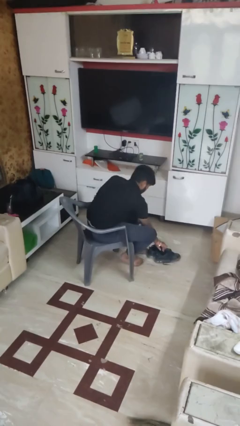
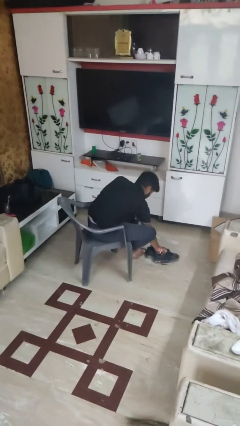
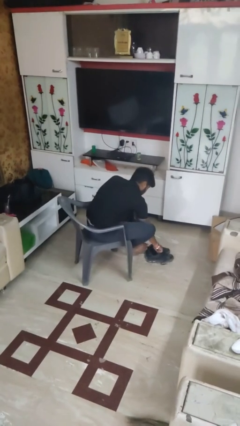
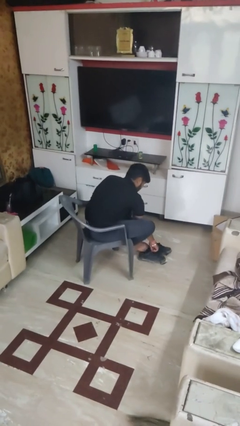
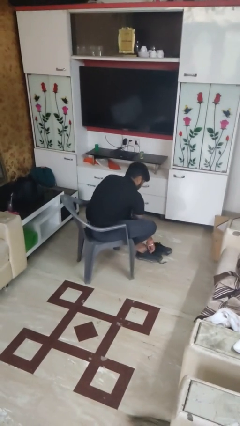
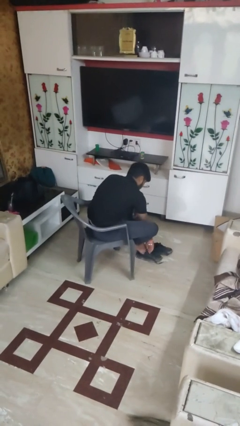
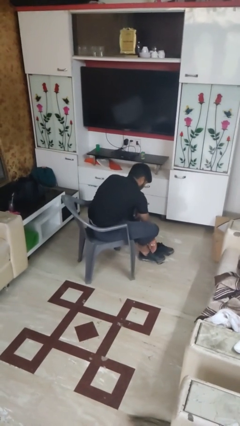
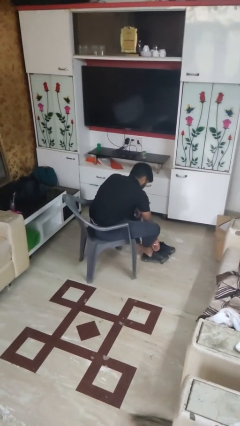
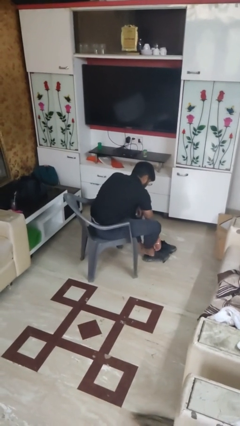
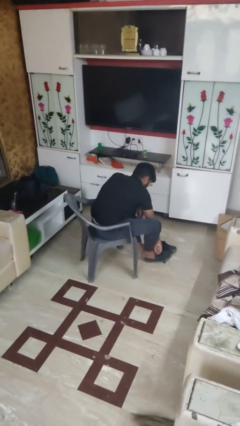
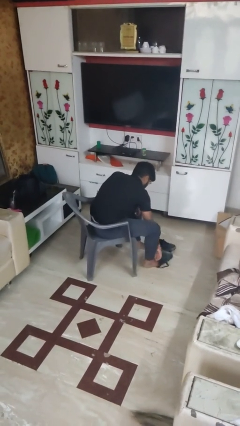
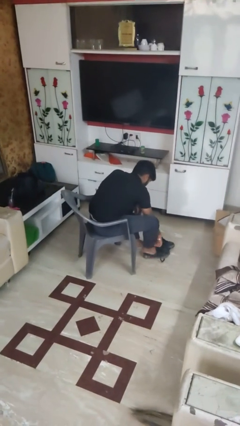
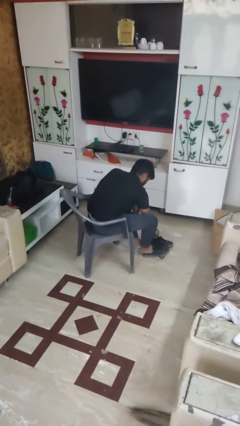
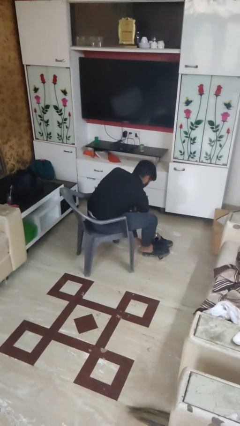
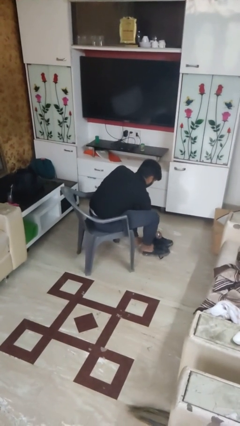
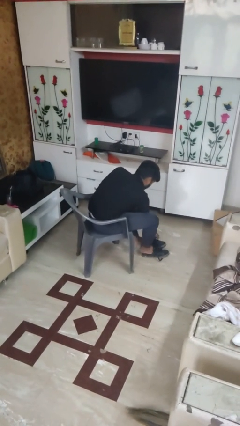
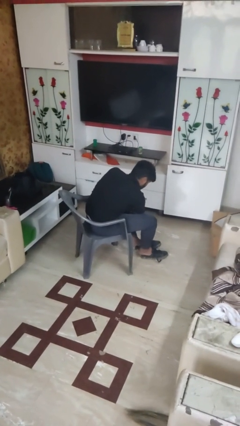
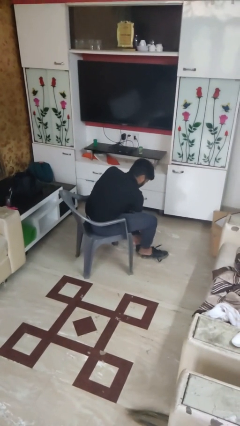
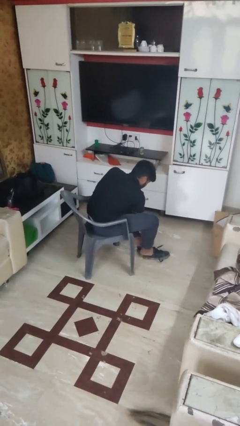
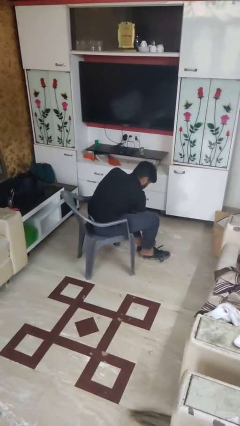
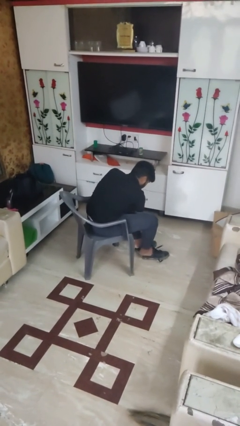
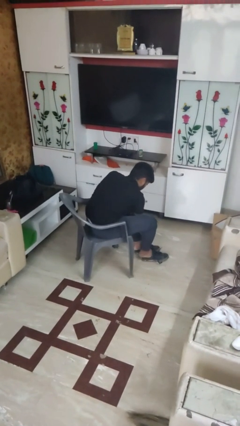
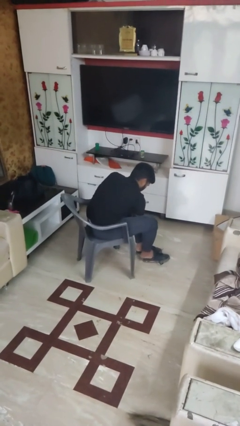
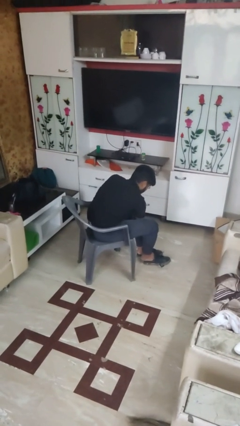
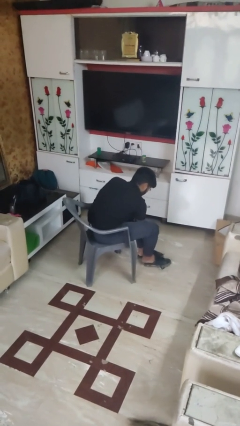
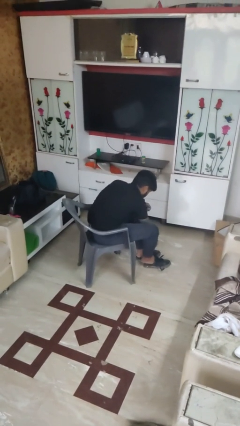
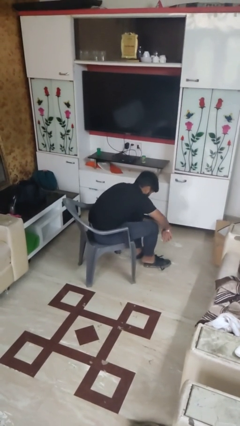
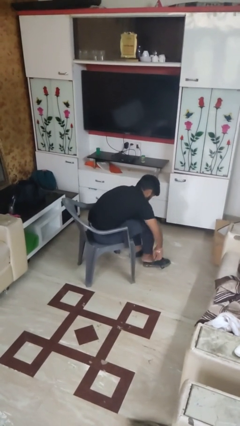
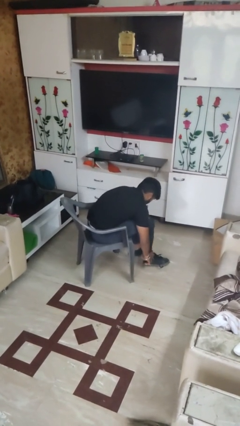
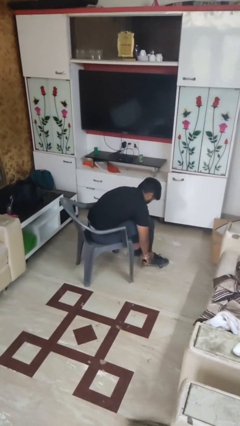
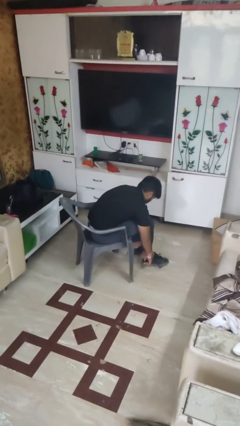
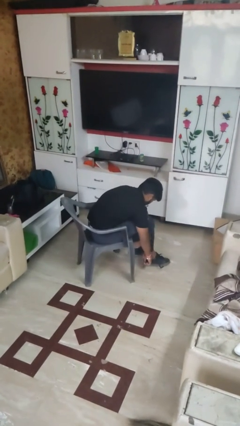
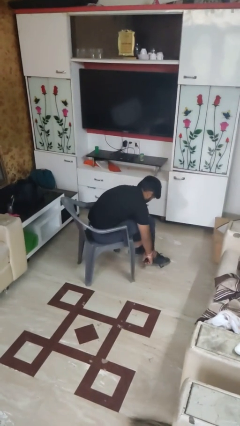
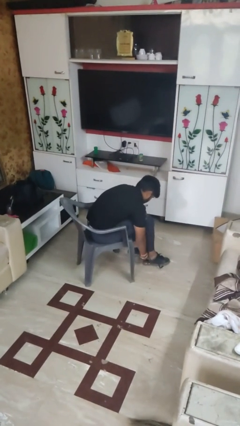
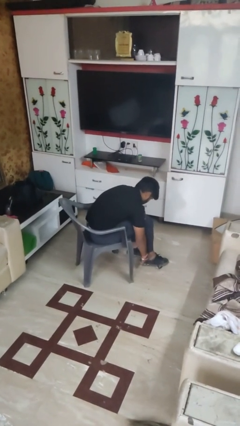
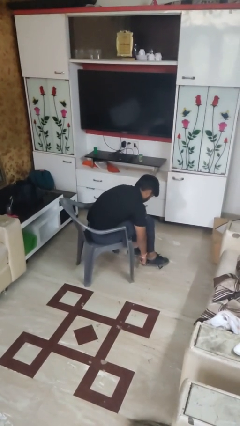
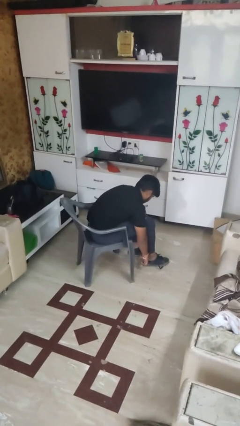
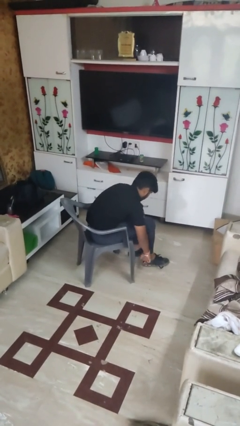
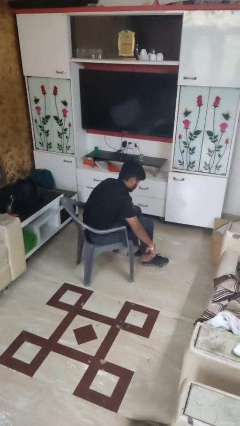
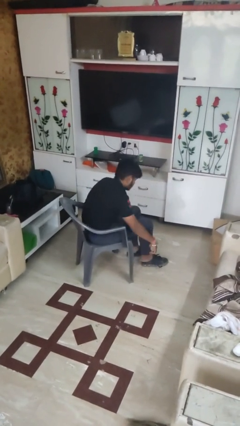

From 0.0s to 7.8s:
person puts on shoes

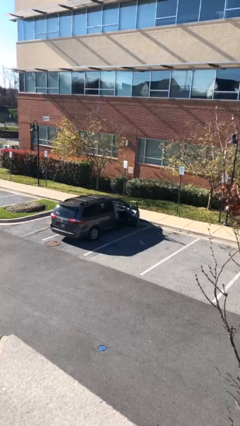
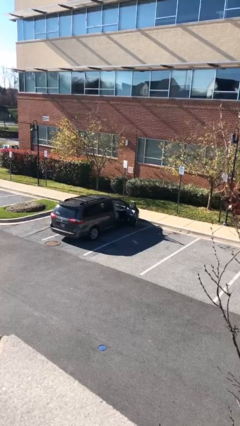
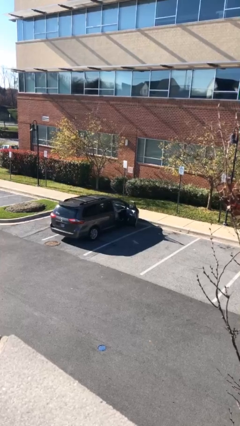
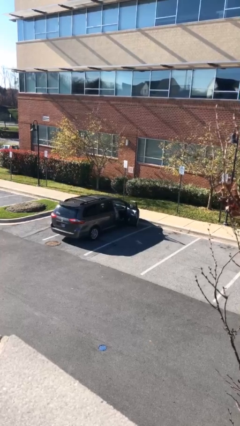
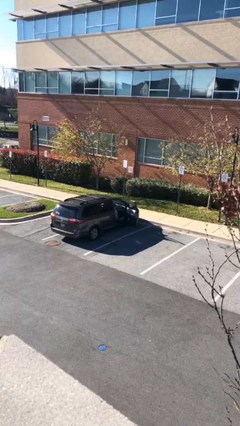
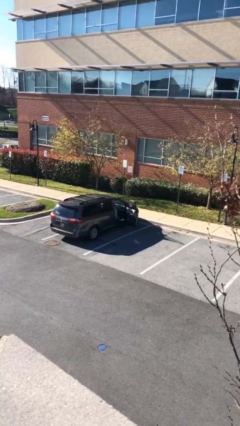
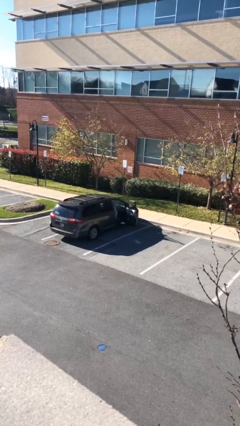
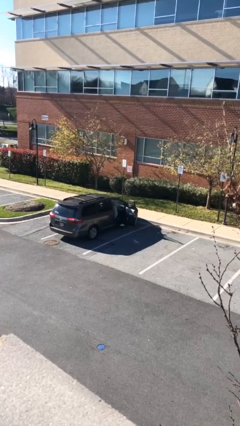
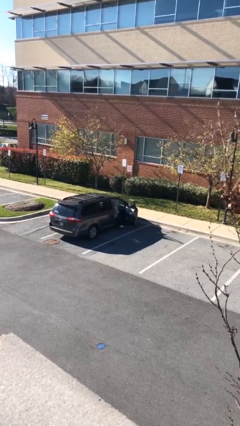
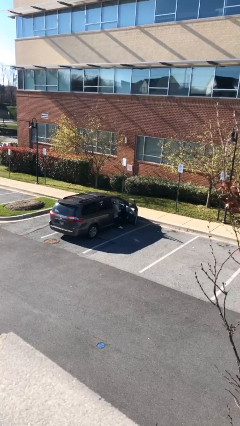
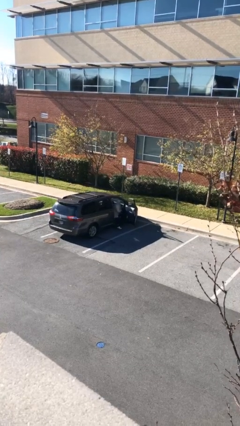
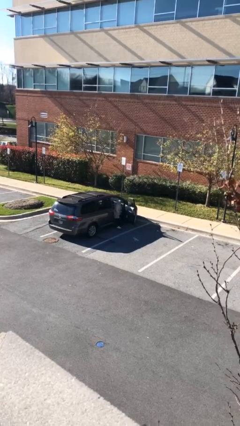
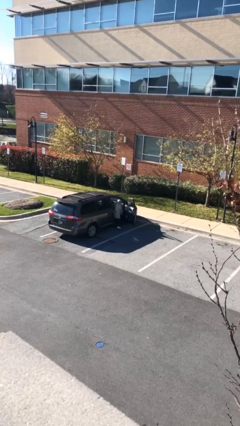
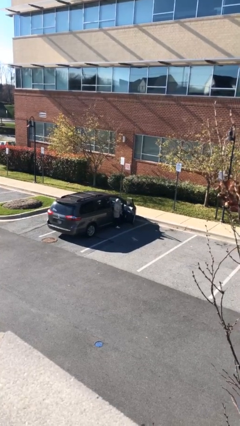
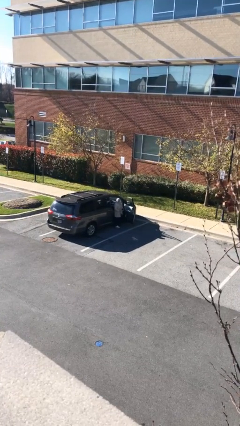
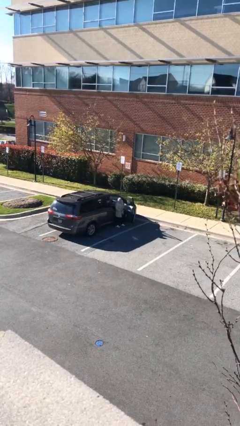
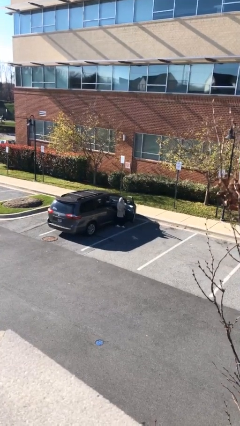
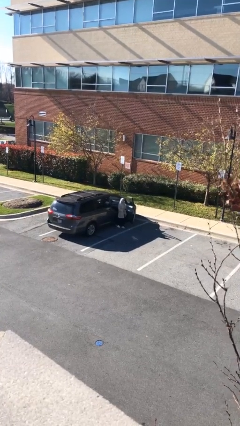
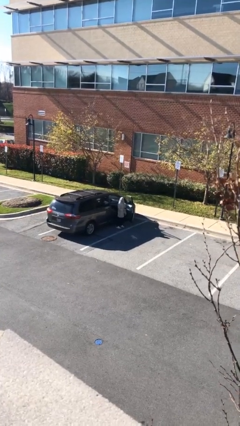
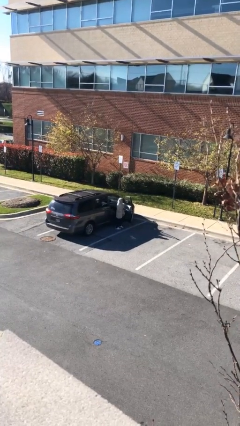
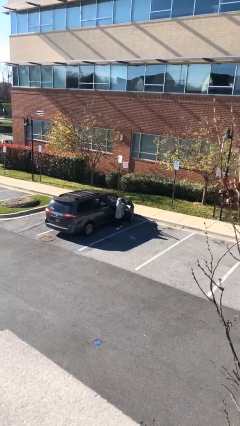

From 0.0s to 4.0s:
person exits car

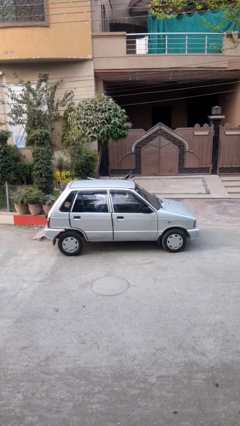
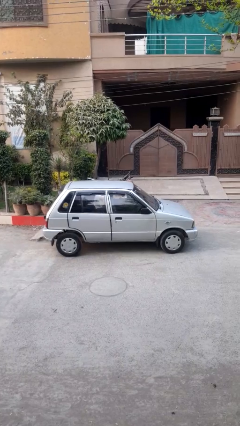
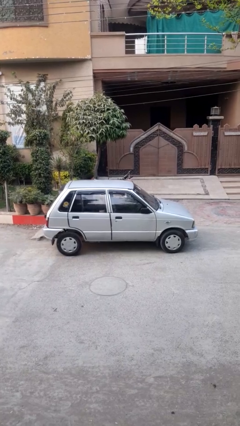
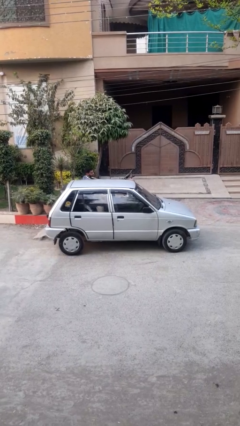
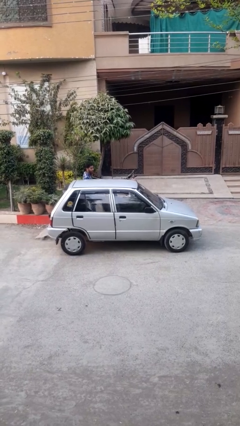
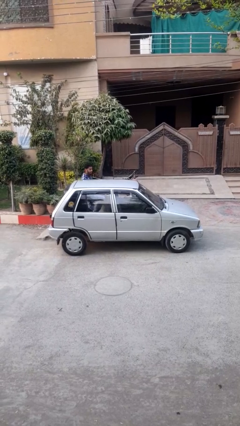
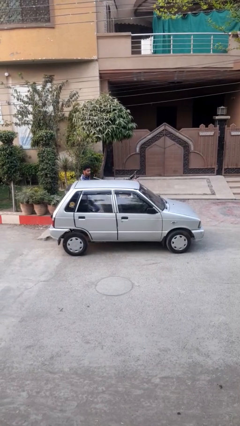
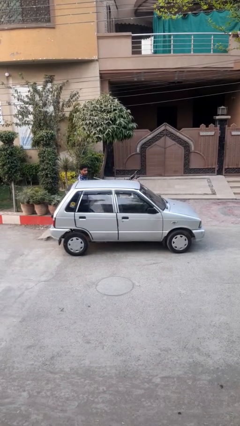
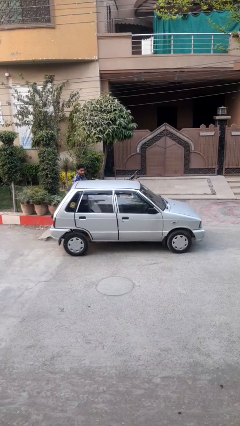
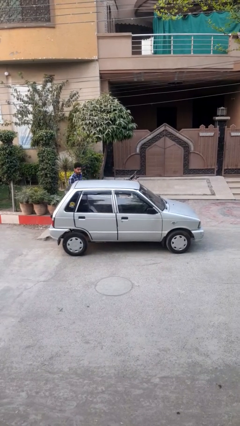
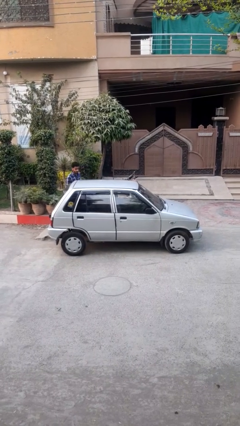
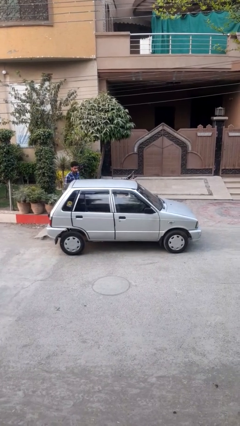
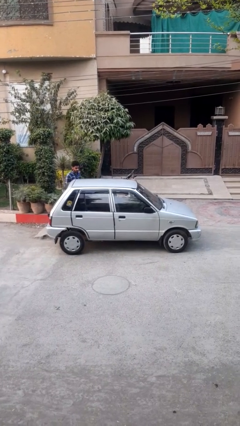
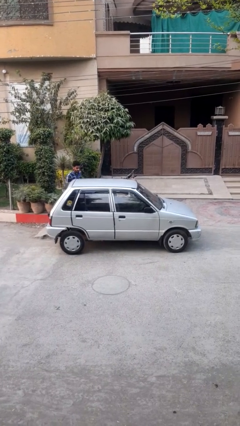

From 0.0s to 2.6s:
car drops off person

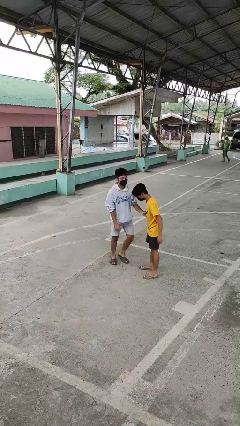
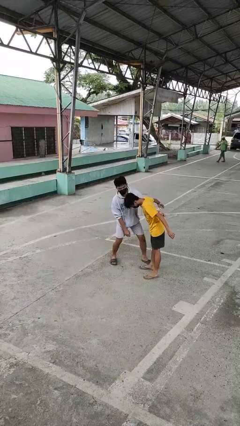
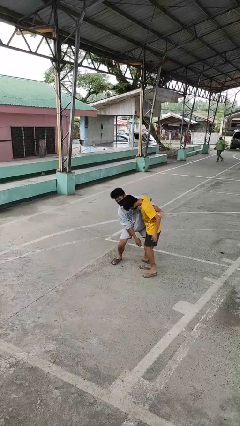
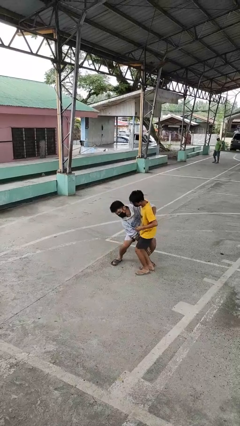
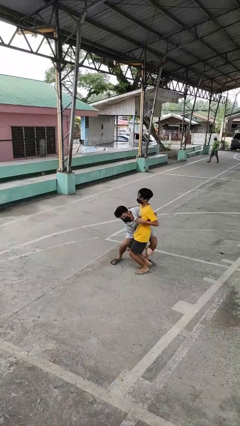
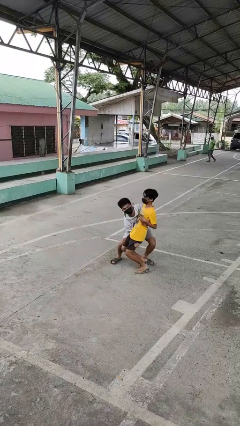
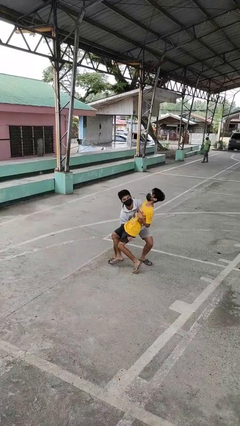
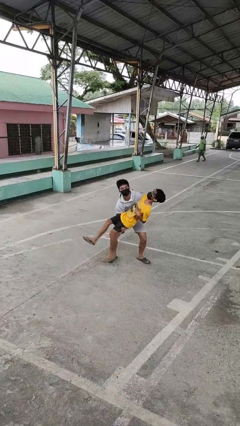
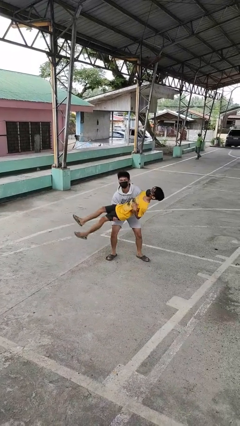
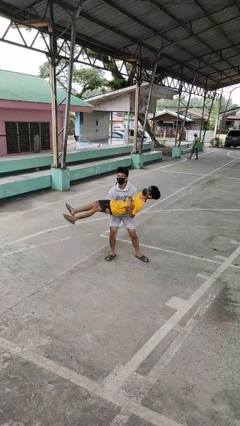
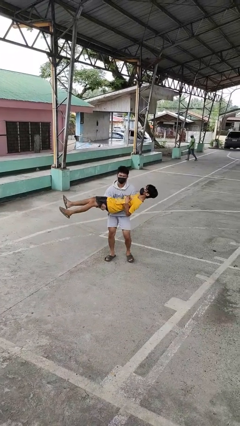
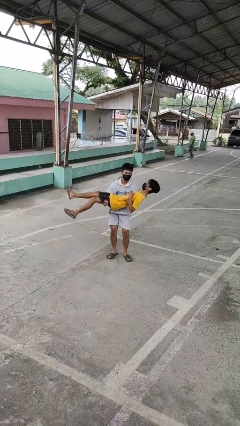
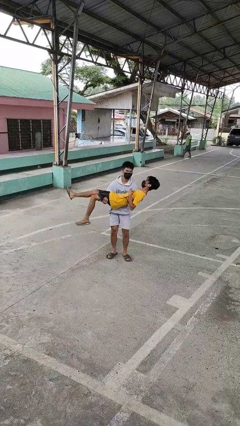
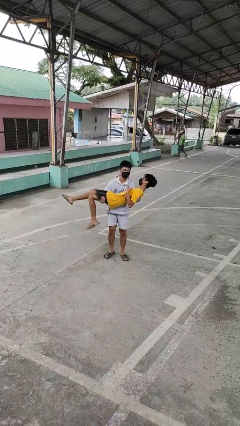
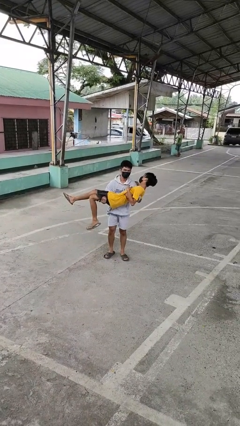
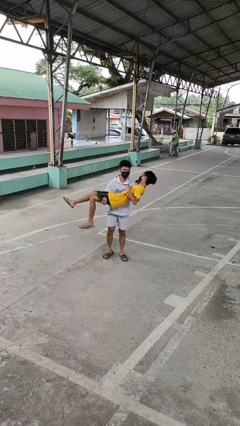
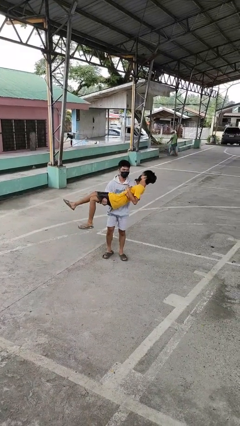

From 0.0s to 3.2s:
person picks up person
